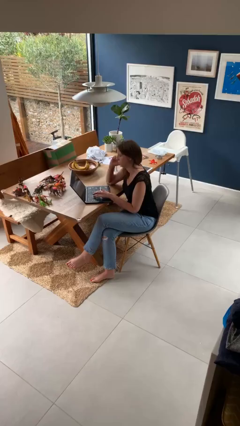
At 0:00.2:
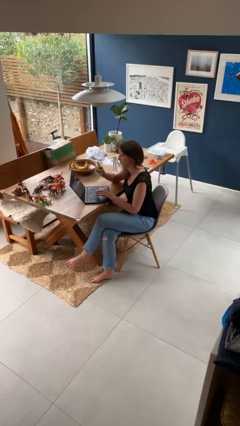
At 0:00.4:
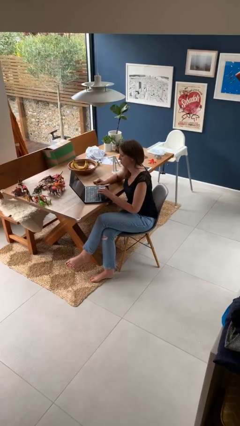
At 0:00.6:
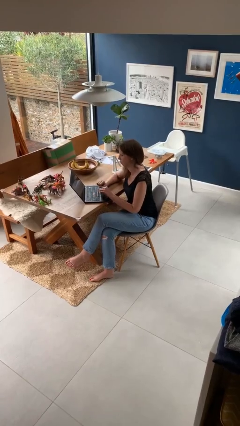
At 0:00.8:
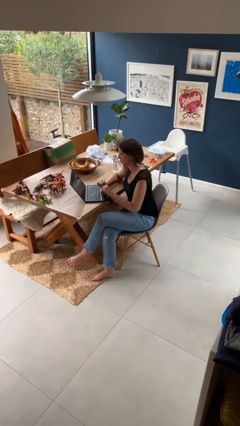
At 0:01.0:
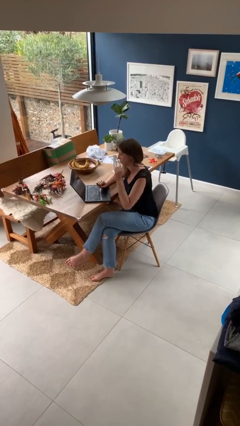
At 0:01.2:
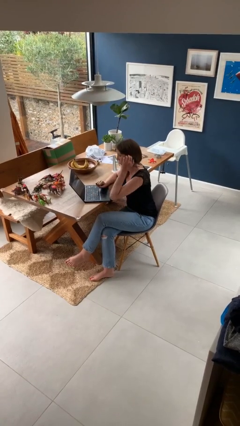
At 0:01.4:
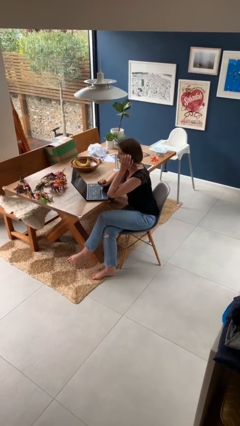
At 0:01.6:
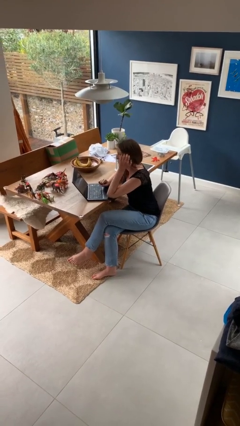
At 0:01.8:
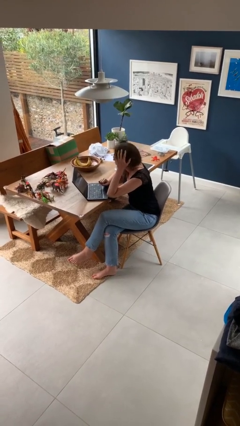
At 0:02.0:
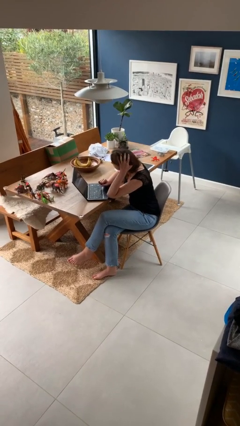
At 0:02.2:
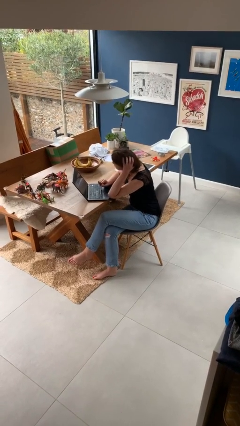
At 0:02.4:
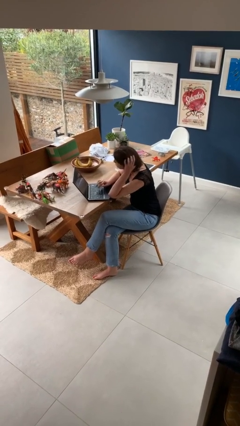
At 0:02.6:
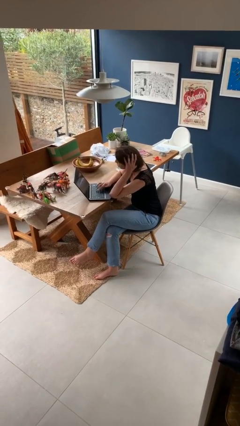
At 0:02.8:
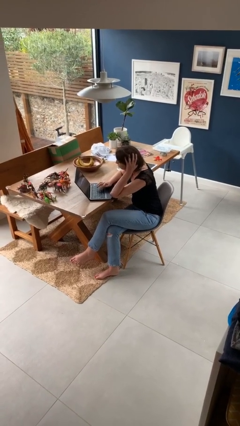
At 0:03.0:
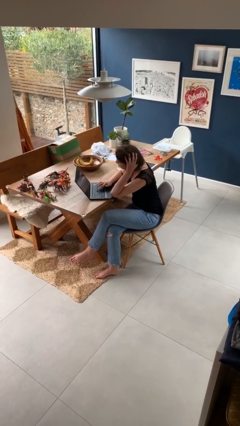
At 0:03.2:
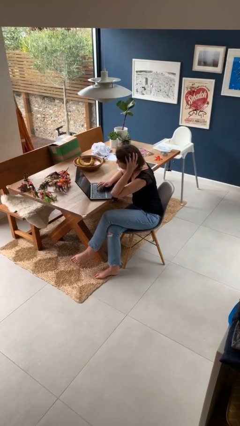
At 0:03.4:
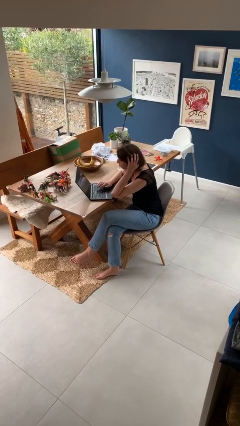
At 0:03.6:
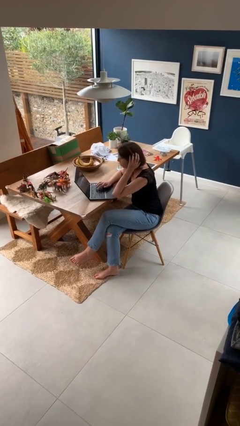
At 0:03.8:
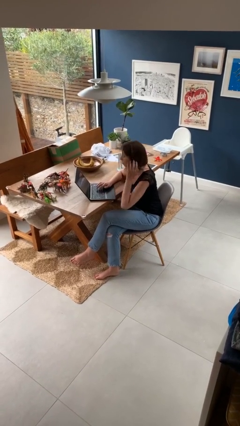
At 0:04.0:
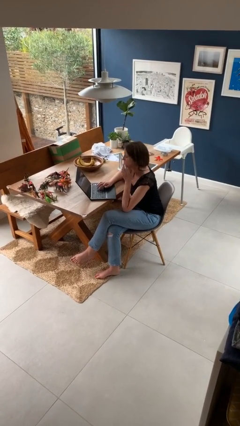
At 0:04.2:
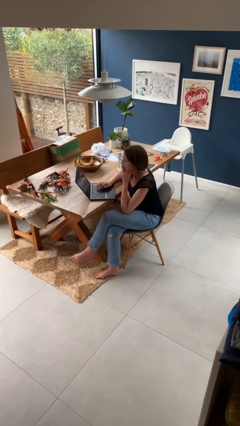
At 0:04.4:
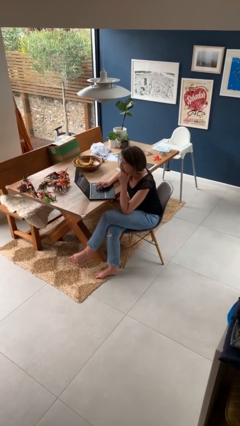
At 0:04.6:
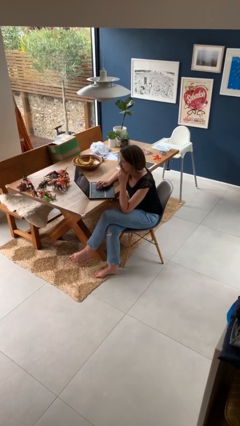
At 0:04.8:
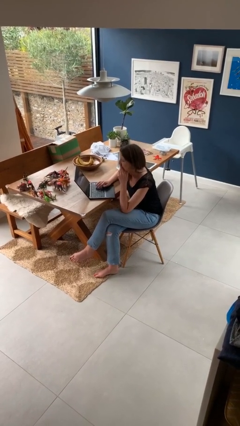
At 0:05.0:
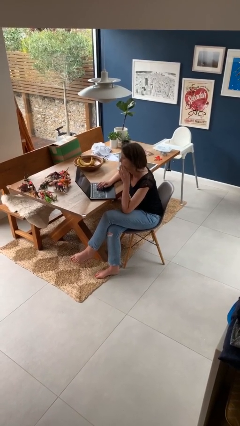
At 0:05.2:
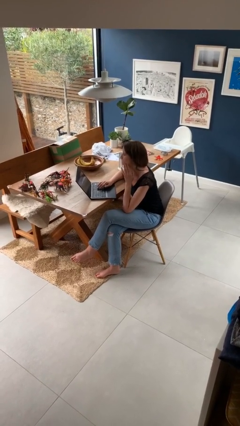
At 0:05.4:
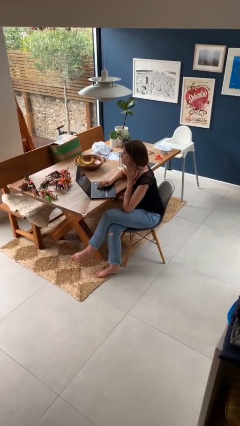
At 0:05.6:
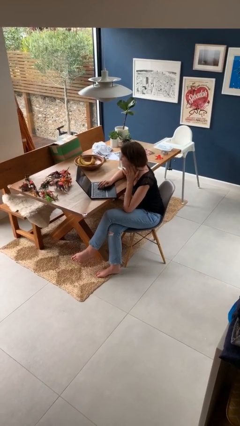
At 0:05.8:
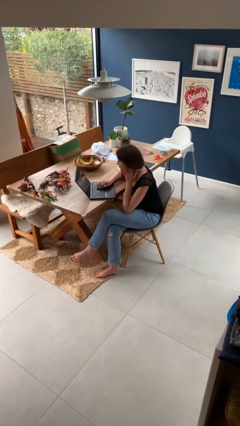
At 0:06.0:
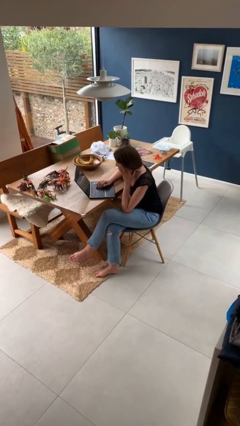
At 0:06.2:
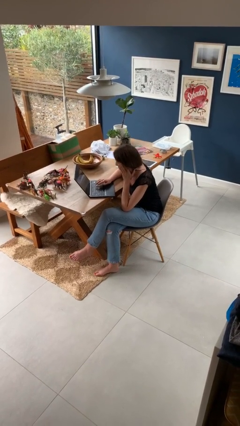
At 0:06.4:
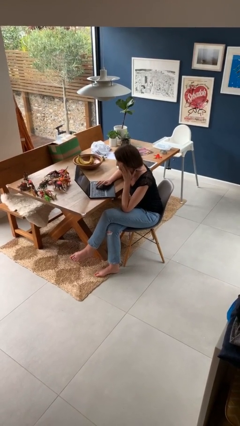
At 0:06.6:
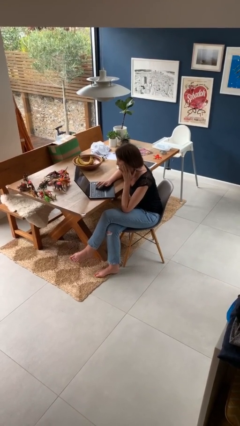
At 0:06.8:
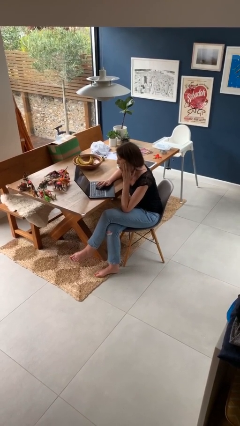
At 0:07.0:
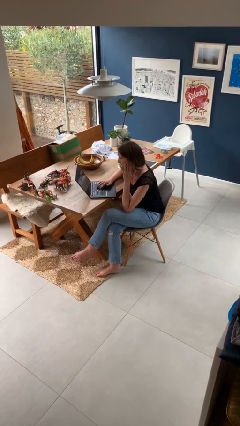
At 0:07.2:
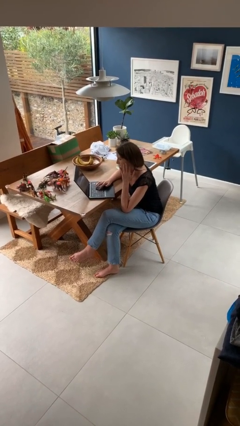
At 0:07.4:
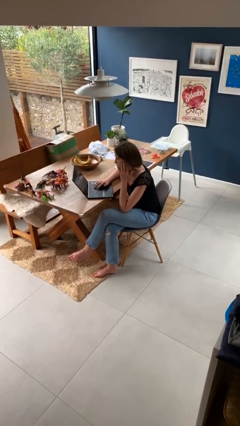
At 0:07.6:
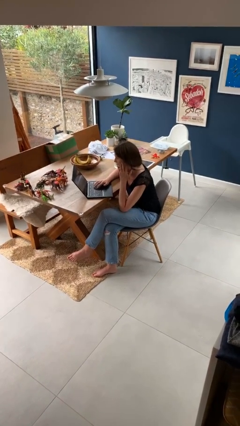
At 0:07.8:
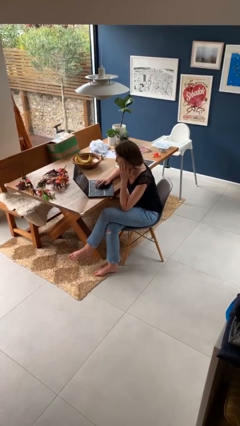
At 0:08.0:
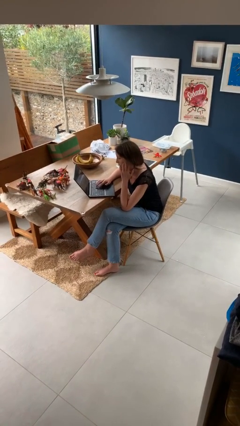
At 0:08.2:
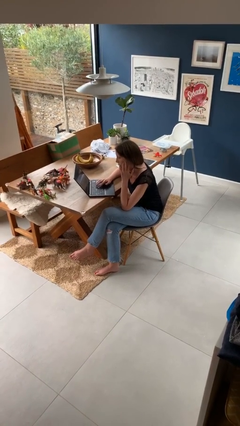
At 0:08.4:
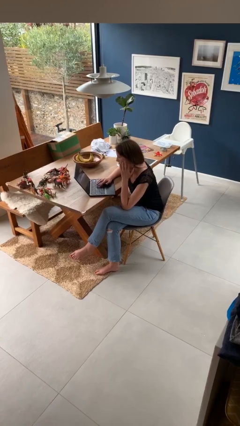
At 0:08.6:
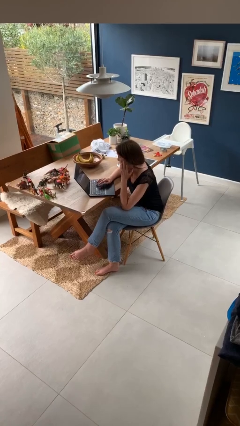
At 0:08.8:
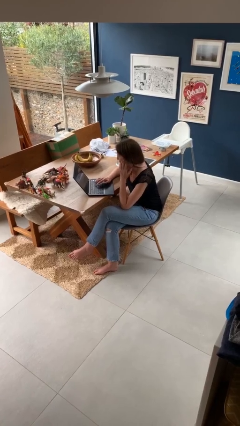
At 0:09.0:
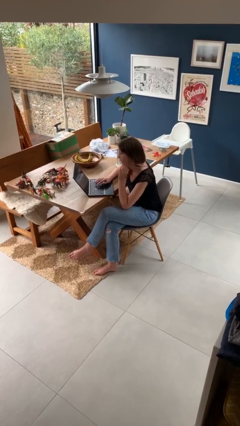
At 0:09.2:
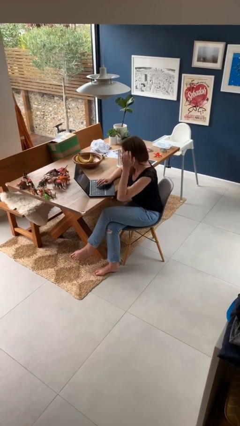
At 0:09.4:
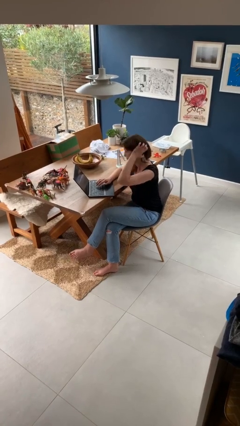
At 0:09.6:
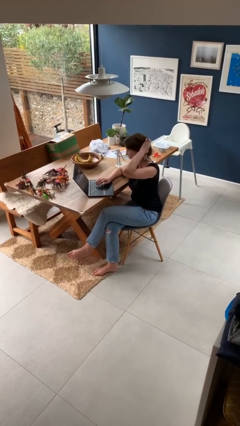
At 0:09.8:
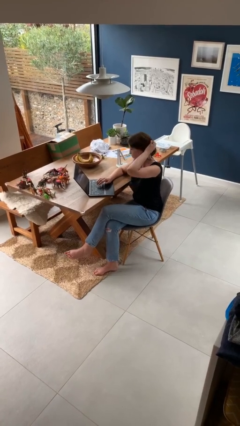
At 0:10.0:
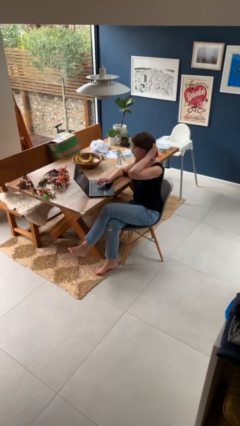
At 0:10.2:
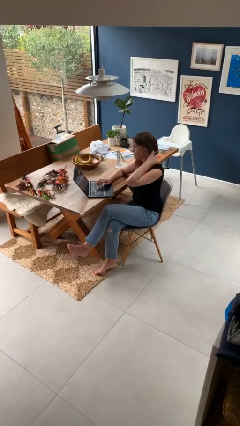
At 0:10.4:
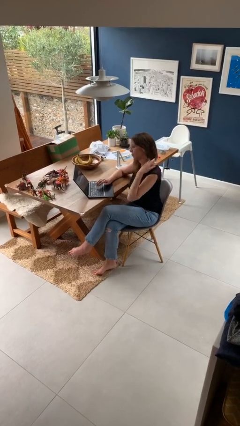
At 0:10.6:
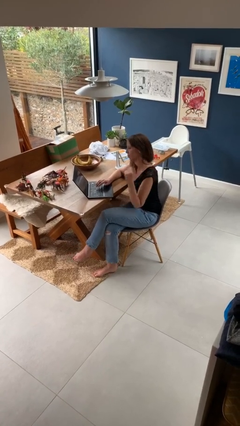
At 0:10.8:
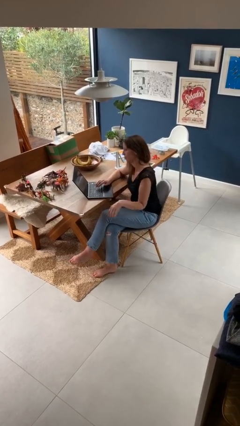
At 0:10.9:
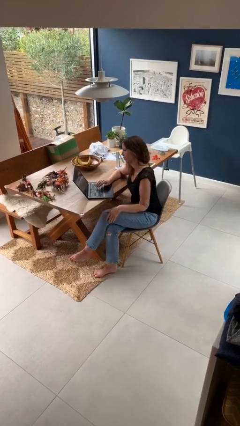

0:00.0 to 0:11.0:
person interacts with laptop

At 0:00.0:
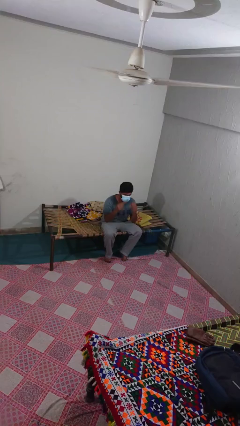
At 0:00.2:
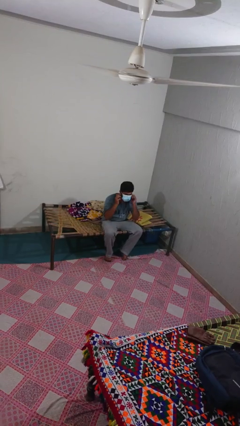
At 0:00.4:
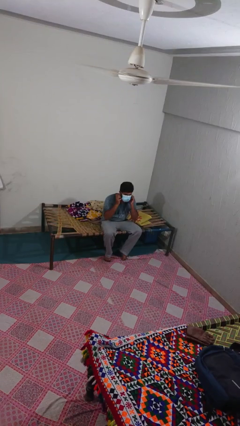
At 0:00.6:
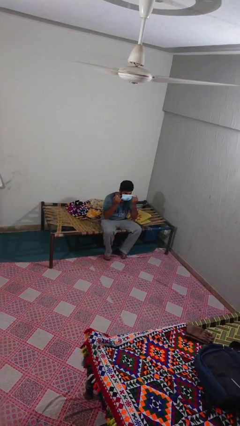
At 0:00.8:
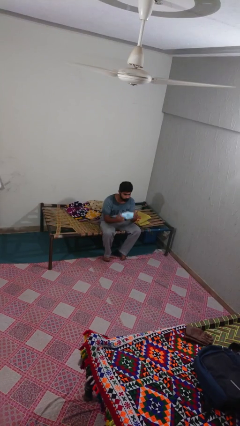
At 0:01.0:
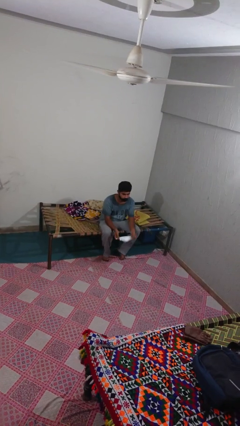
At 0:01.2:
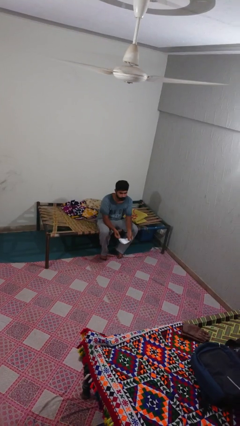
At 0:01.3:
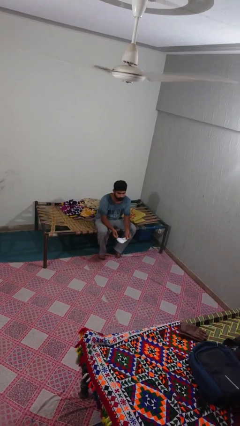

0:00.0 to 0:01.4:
person takes off facemask

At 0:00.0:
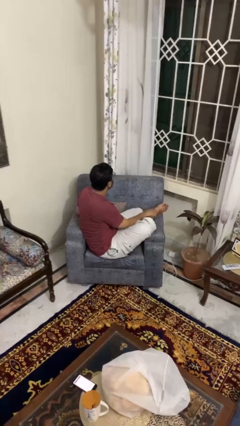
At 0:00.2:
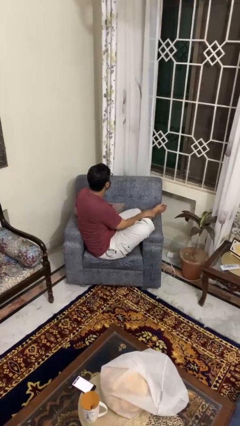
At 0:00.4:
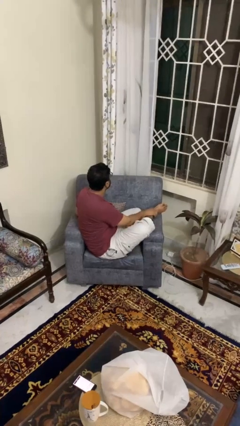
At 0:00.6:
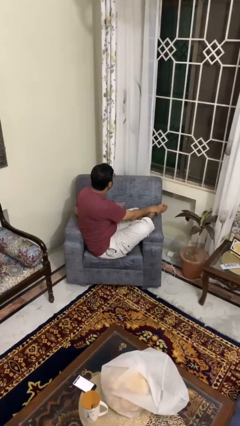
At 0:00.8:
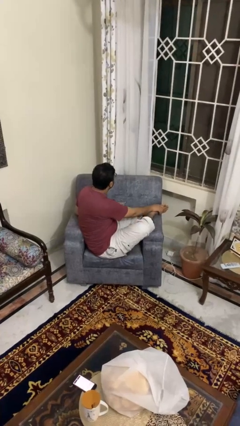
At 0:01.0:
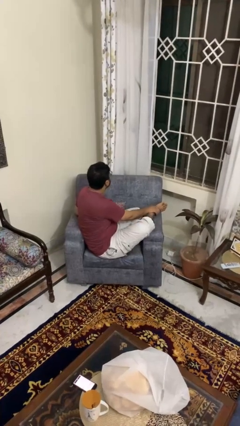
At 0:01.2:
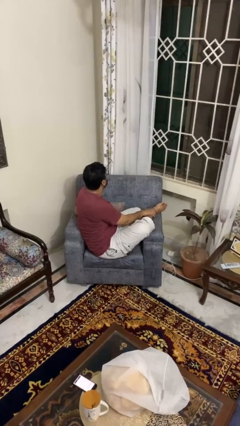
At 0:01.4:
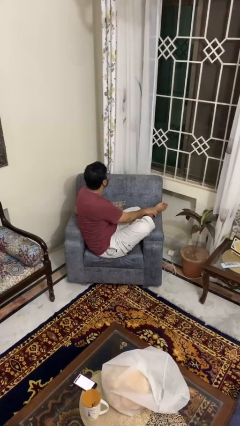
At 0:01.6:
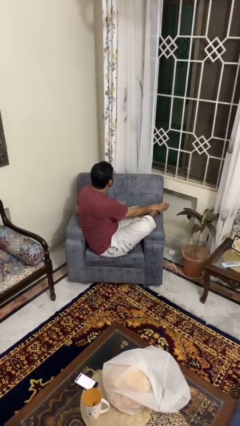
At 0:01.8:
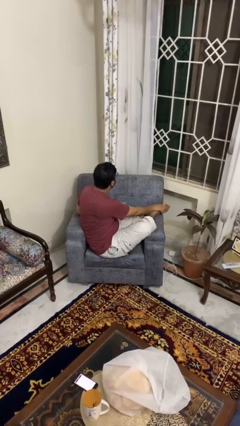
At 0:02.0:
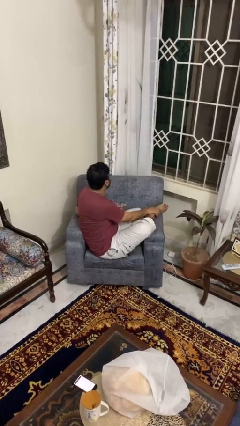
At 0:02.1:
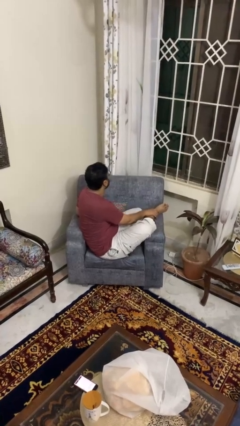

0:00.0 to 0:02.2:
person rubs foot

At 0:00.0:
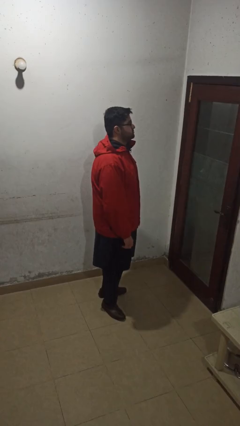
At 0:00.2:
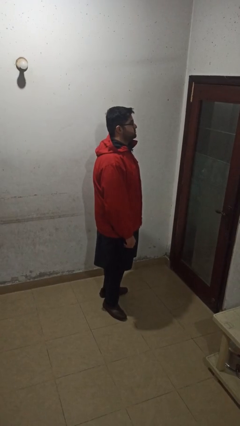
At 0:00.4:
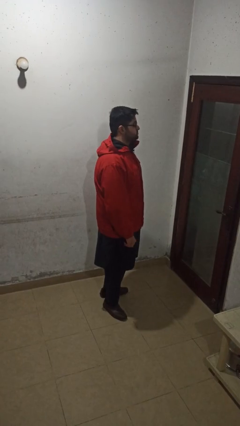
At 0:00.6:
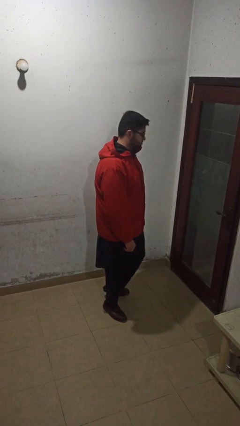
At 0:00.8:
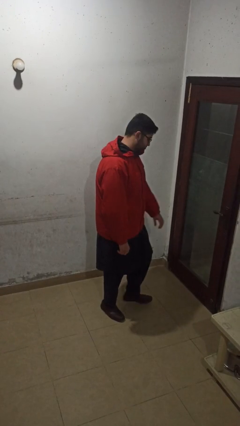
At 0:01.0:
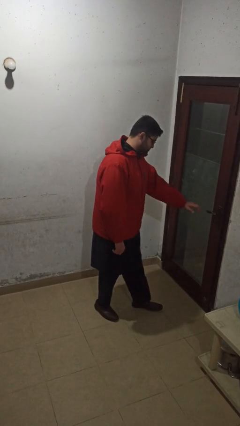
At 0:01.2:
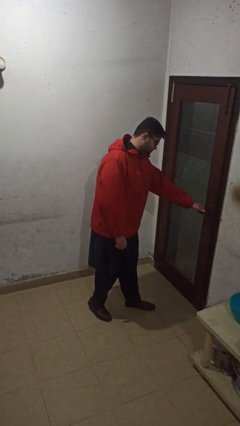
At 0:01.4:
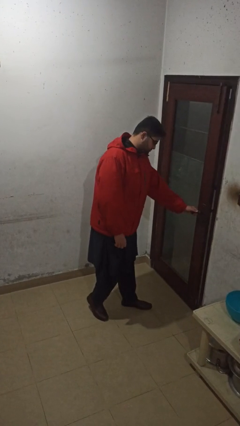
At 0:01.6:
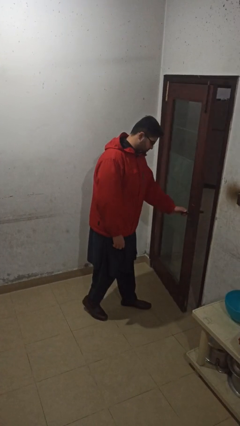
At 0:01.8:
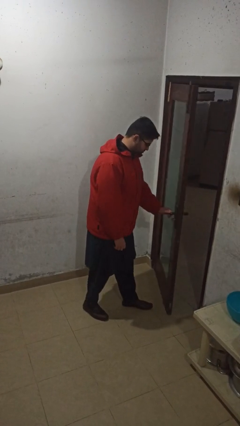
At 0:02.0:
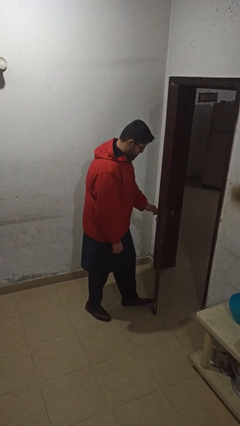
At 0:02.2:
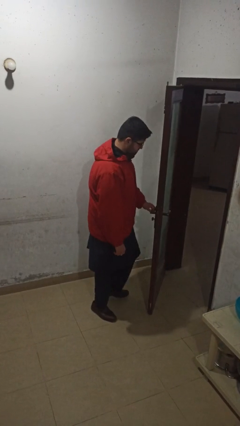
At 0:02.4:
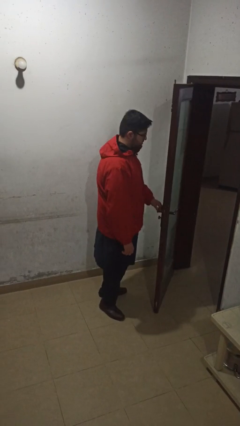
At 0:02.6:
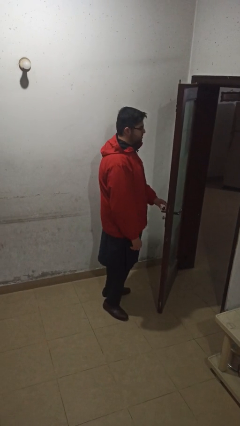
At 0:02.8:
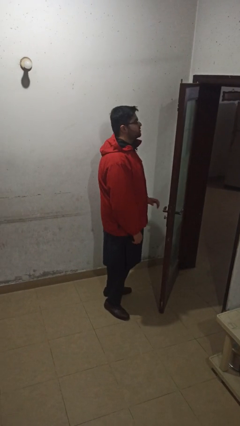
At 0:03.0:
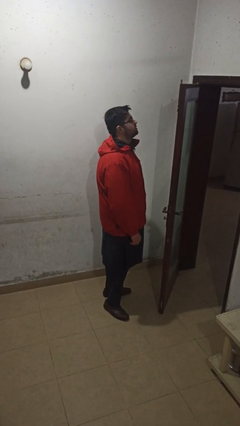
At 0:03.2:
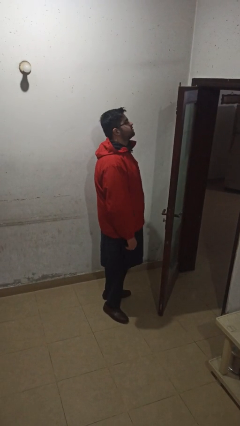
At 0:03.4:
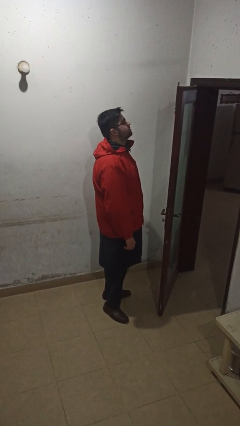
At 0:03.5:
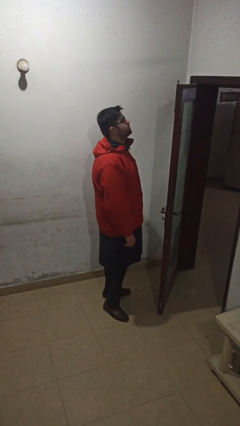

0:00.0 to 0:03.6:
person opens facility door
